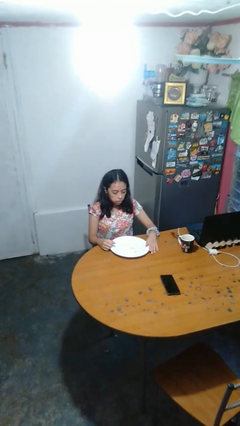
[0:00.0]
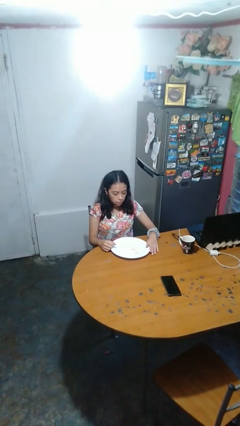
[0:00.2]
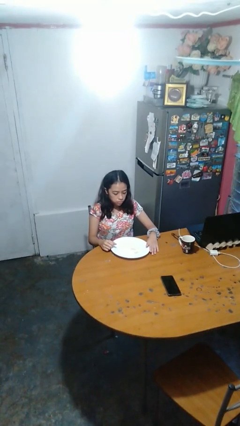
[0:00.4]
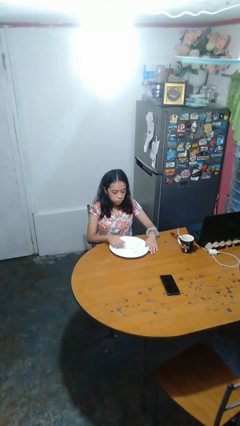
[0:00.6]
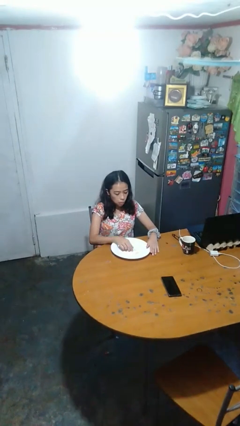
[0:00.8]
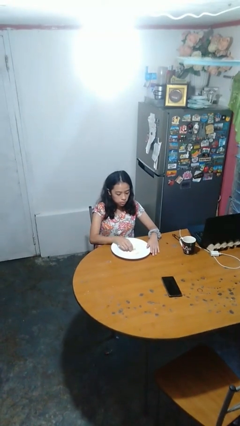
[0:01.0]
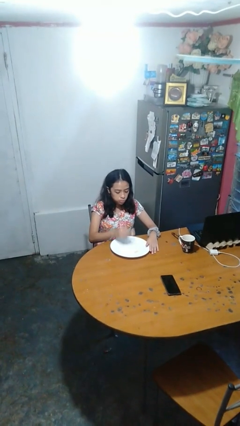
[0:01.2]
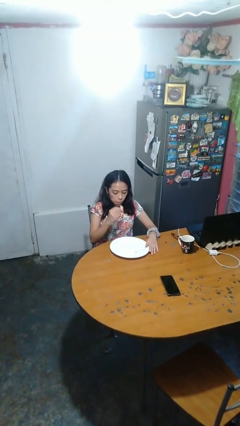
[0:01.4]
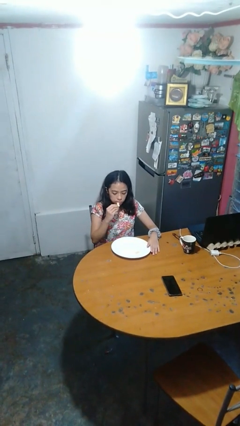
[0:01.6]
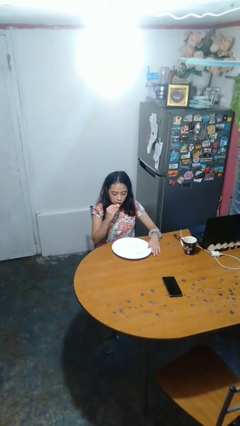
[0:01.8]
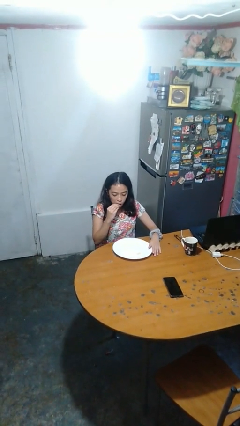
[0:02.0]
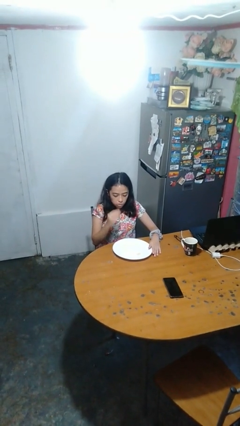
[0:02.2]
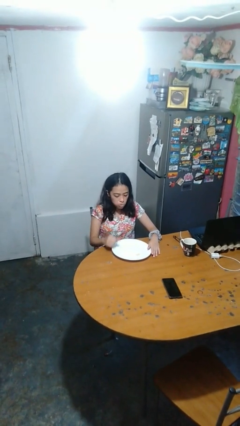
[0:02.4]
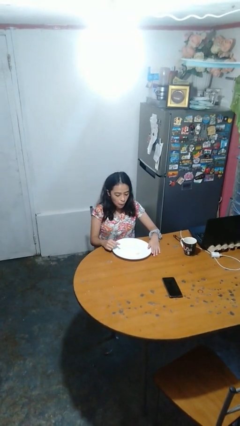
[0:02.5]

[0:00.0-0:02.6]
person eats with hands

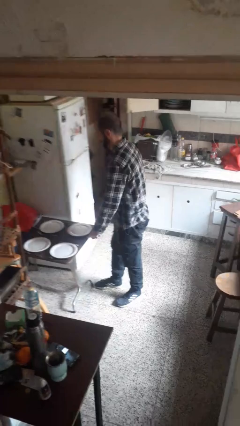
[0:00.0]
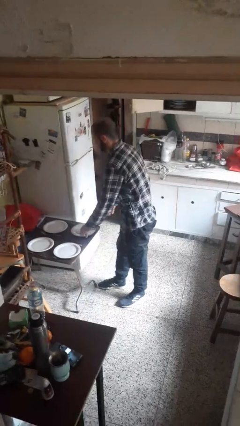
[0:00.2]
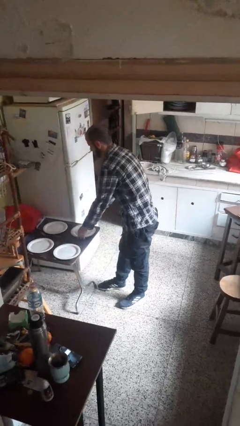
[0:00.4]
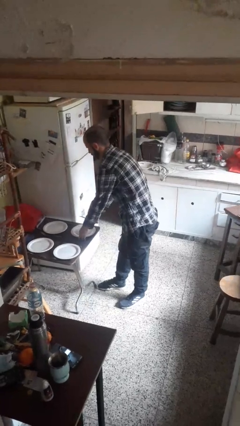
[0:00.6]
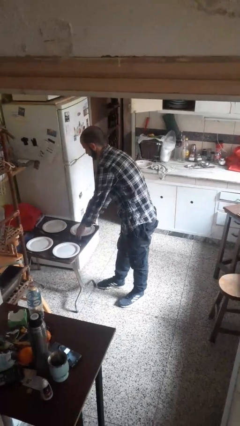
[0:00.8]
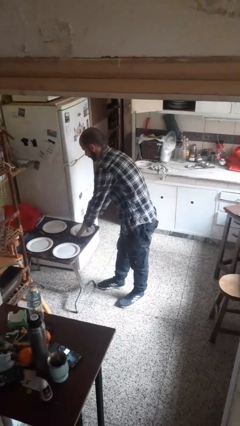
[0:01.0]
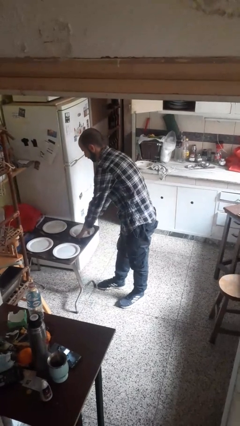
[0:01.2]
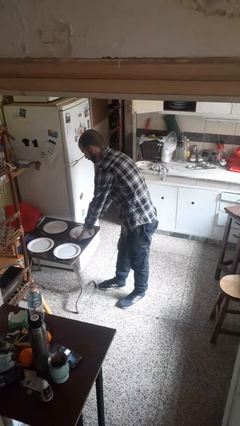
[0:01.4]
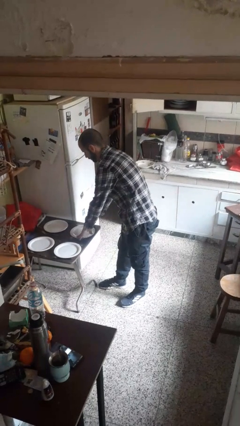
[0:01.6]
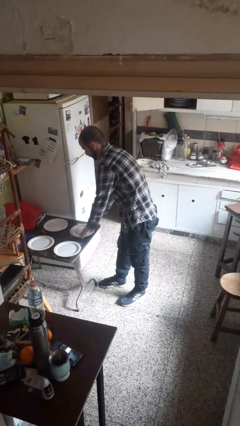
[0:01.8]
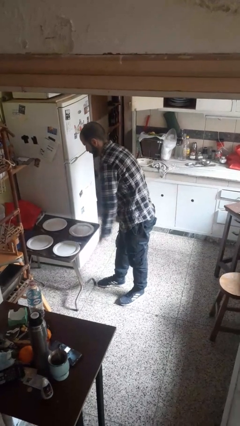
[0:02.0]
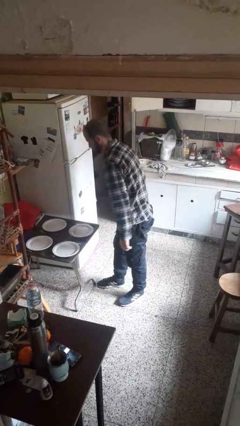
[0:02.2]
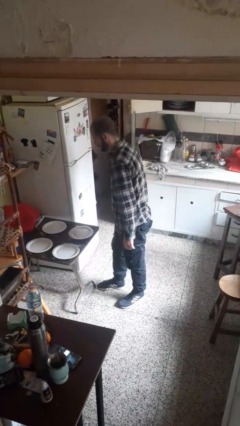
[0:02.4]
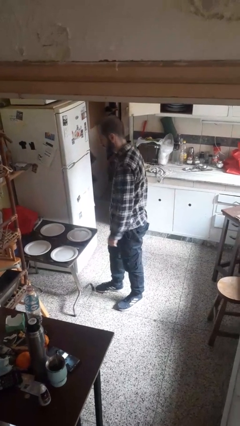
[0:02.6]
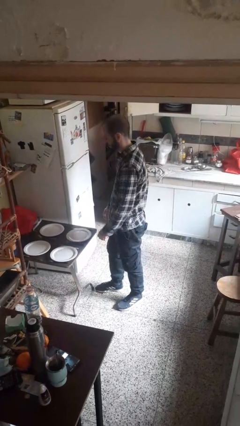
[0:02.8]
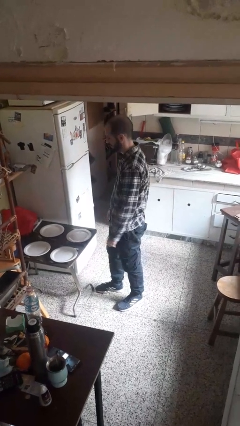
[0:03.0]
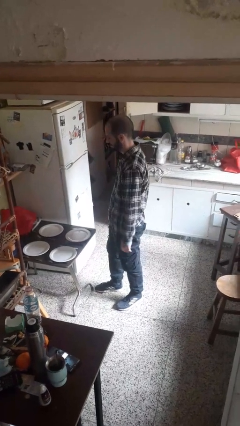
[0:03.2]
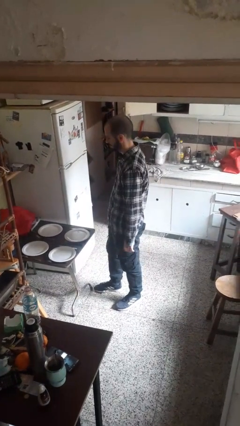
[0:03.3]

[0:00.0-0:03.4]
person sets table

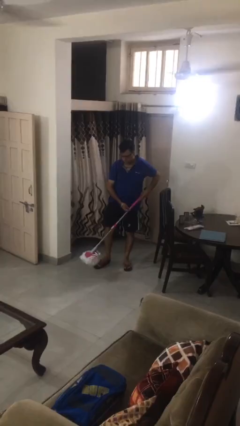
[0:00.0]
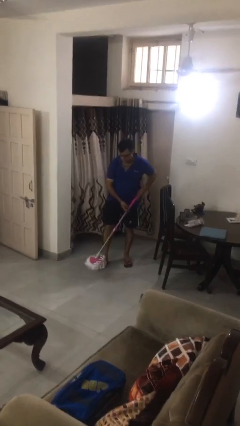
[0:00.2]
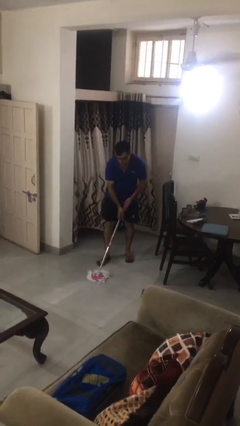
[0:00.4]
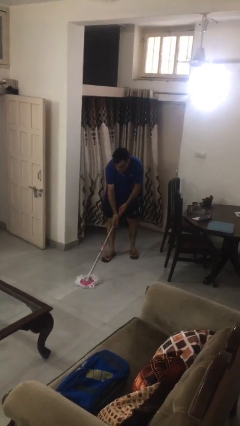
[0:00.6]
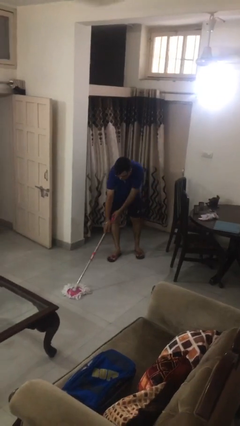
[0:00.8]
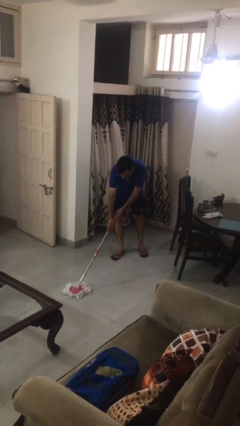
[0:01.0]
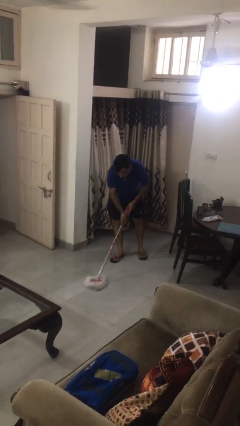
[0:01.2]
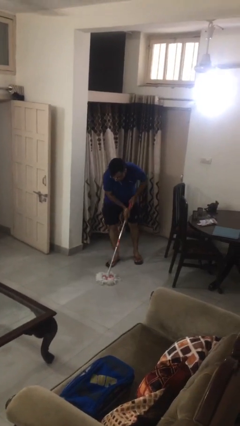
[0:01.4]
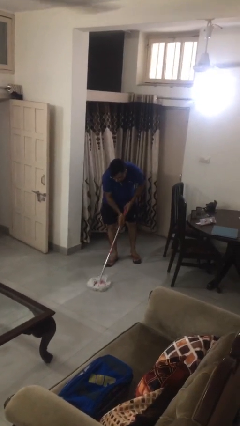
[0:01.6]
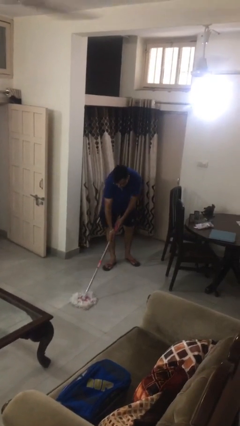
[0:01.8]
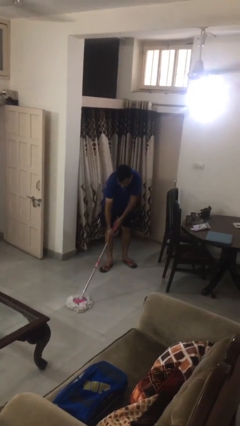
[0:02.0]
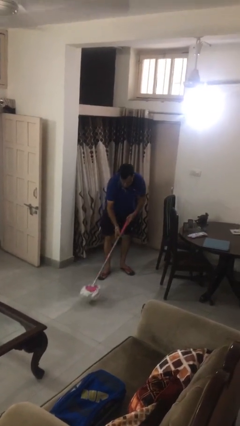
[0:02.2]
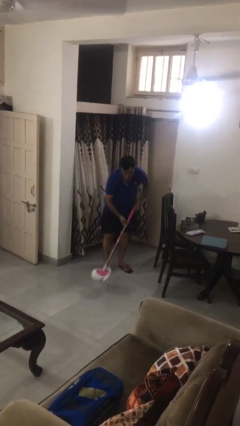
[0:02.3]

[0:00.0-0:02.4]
person mops

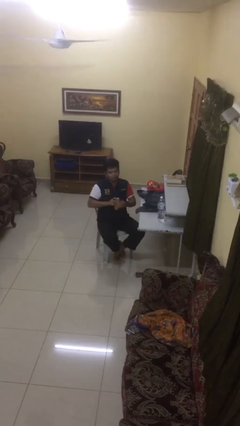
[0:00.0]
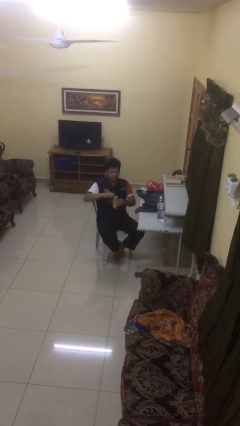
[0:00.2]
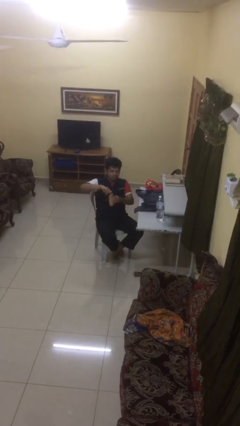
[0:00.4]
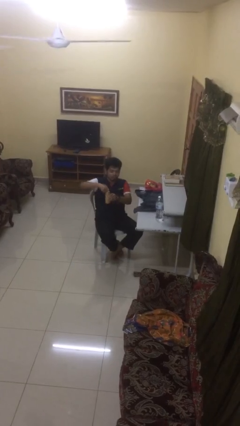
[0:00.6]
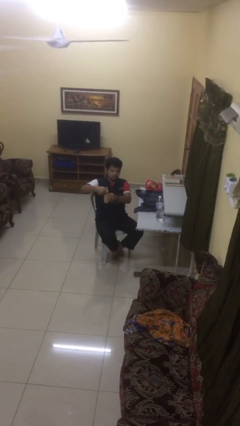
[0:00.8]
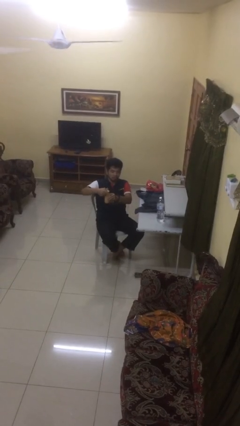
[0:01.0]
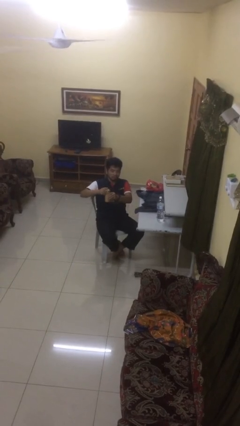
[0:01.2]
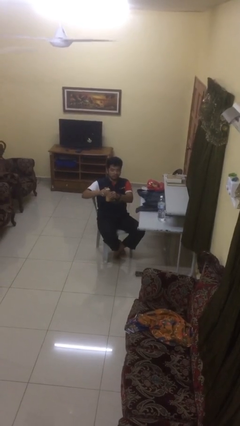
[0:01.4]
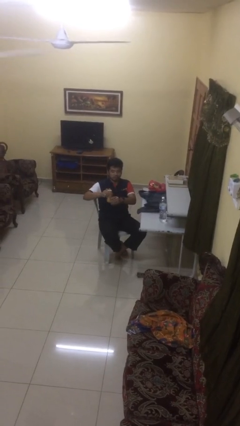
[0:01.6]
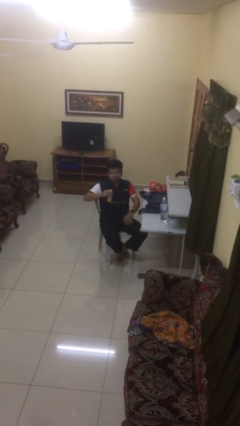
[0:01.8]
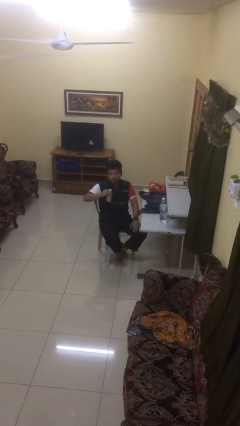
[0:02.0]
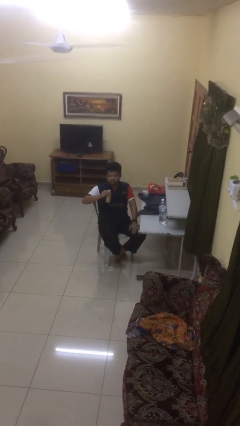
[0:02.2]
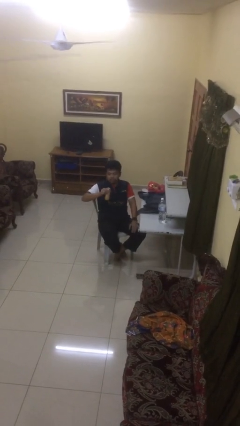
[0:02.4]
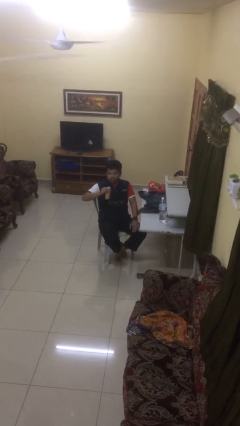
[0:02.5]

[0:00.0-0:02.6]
person opens beverage can

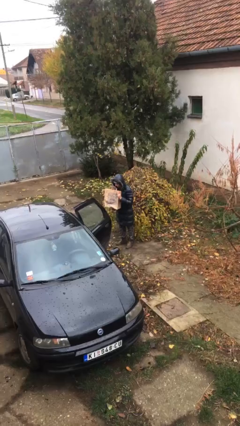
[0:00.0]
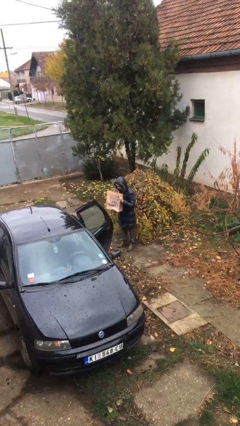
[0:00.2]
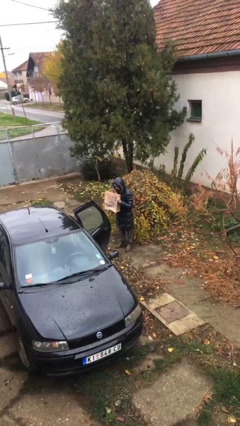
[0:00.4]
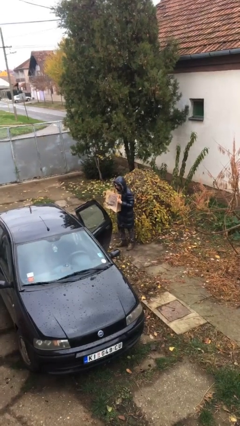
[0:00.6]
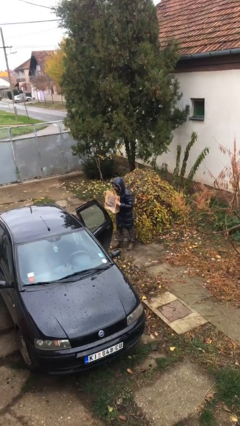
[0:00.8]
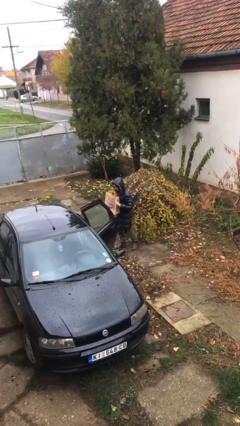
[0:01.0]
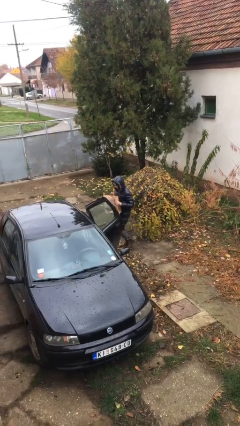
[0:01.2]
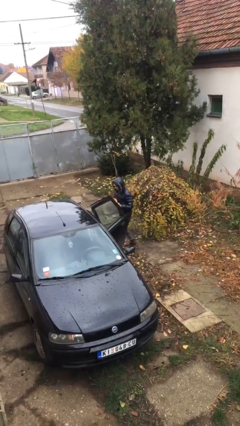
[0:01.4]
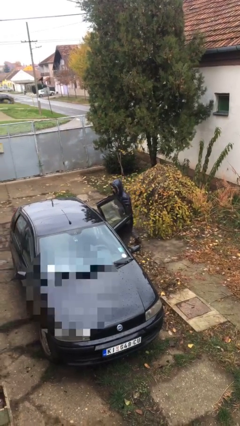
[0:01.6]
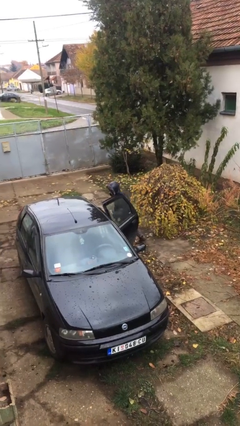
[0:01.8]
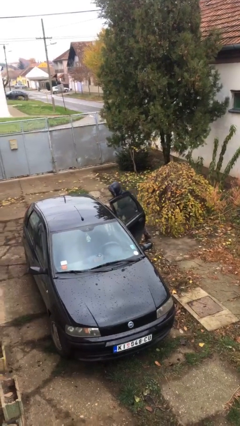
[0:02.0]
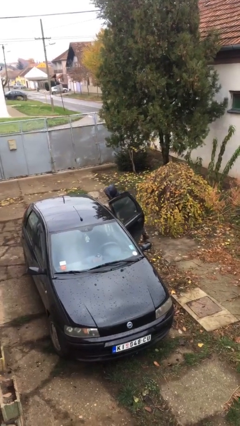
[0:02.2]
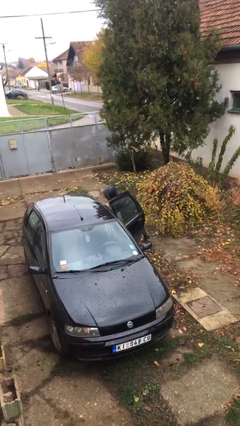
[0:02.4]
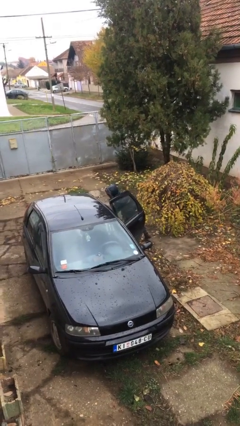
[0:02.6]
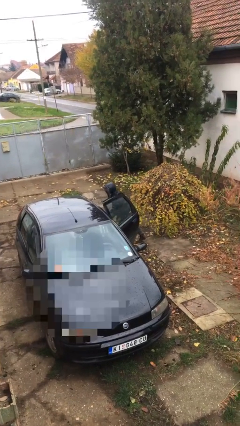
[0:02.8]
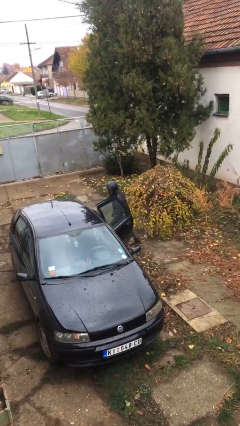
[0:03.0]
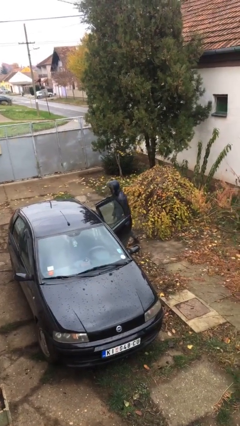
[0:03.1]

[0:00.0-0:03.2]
person loads car

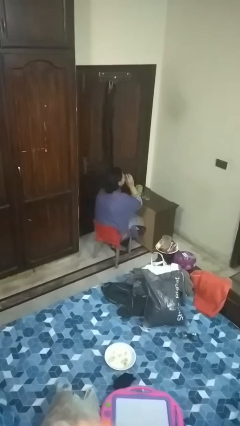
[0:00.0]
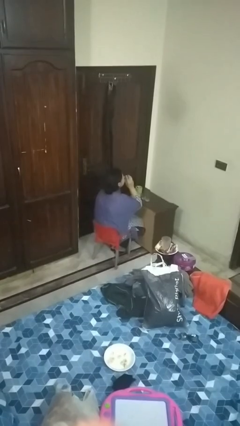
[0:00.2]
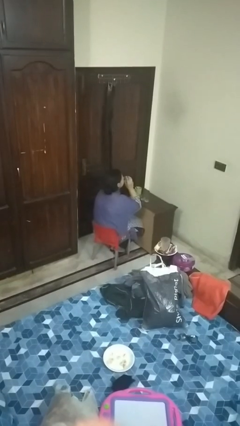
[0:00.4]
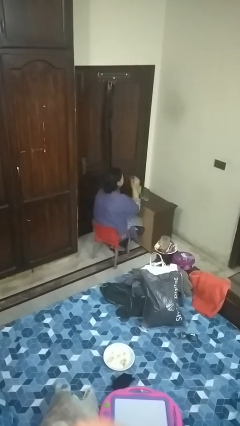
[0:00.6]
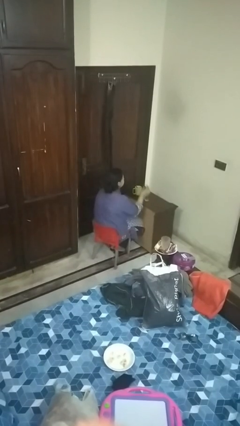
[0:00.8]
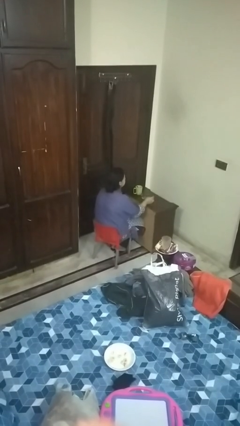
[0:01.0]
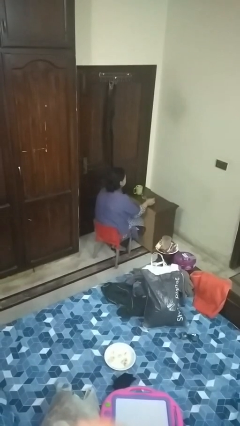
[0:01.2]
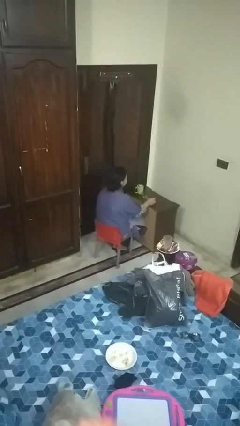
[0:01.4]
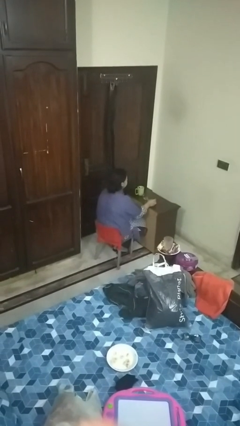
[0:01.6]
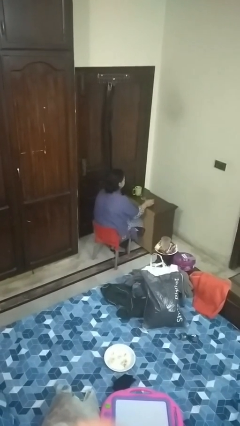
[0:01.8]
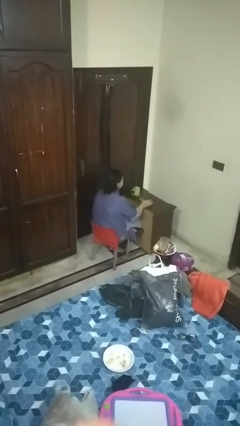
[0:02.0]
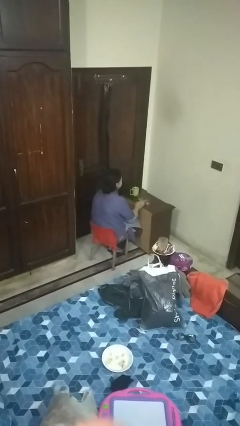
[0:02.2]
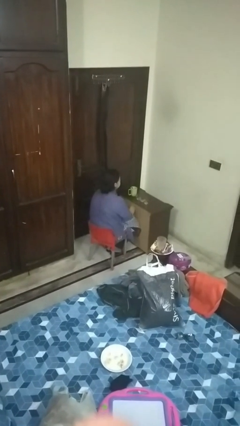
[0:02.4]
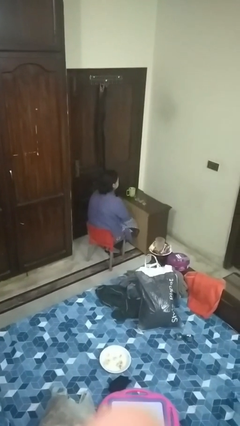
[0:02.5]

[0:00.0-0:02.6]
person puts down object on table

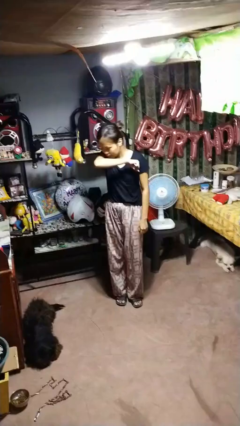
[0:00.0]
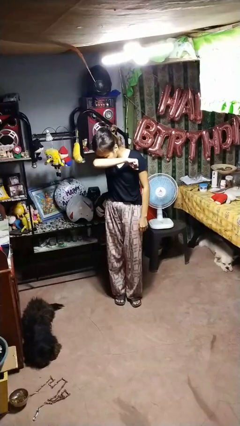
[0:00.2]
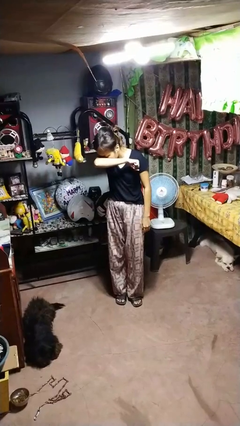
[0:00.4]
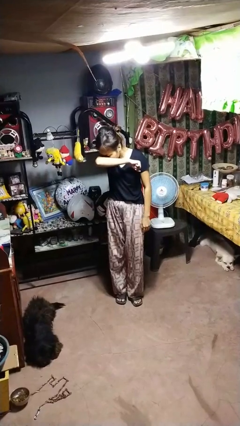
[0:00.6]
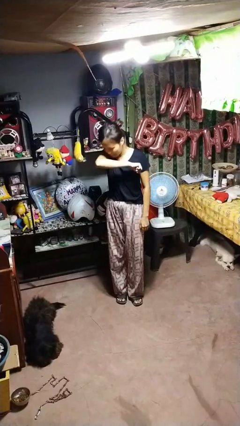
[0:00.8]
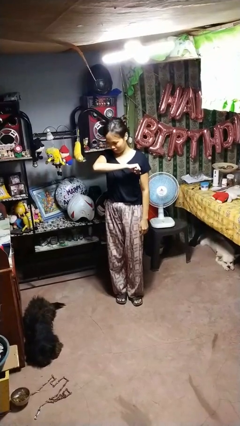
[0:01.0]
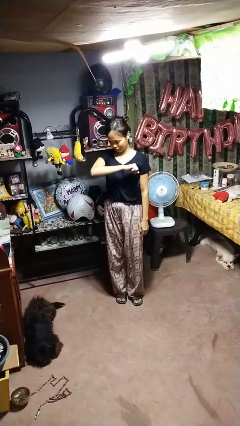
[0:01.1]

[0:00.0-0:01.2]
person sneezes into arm
